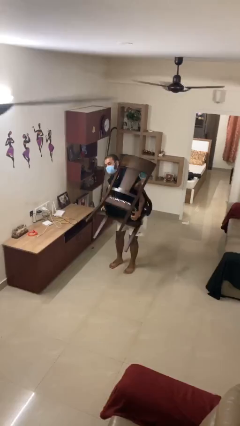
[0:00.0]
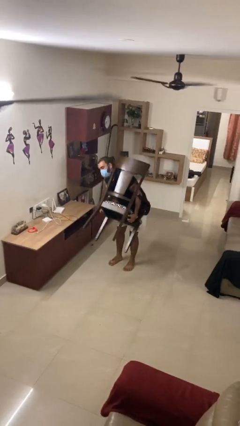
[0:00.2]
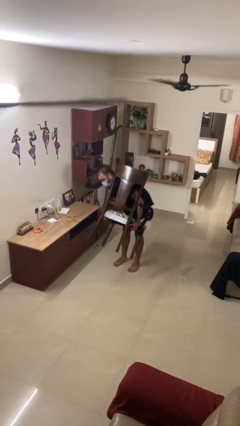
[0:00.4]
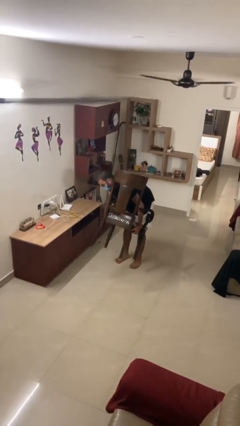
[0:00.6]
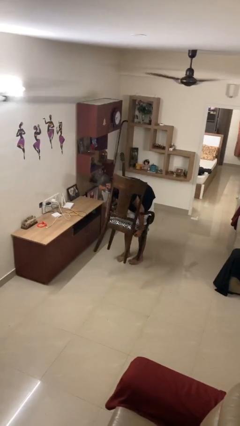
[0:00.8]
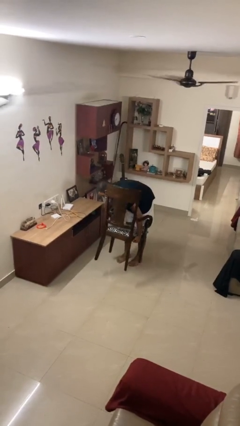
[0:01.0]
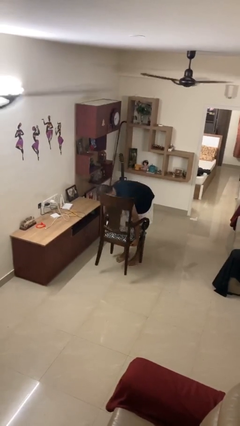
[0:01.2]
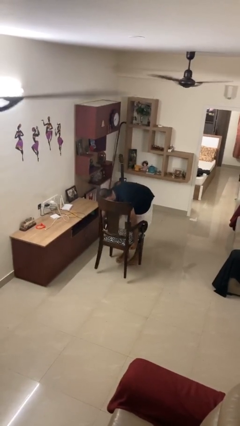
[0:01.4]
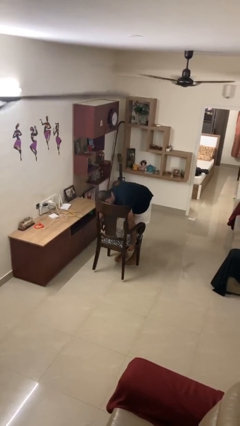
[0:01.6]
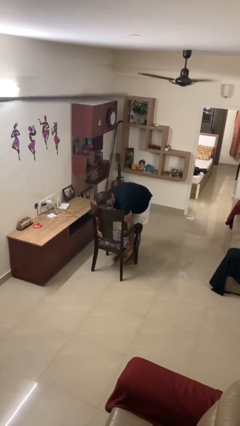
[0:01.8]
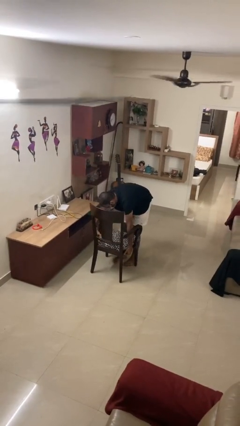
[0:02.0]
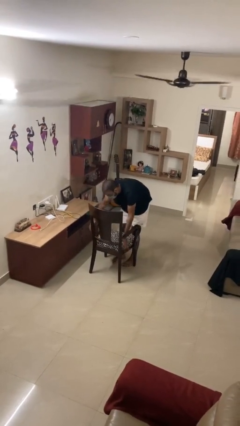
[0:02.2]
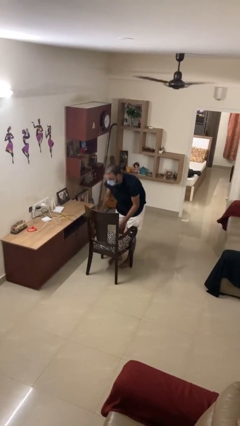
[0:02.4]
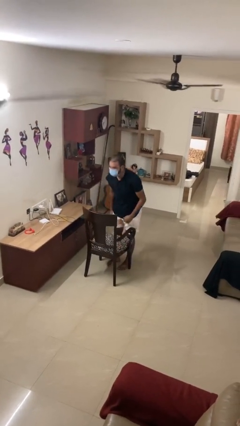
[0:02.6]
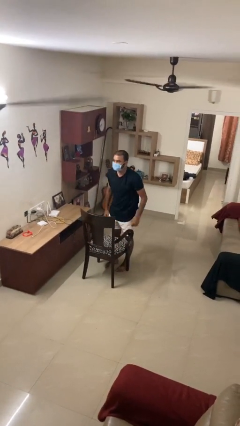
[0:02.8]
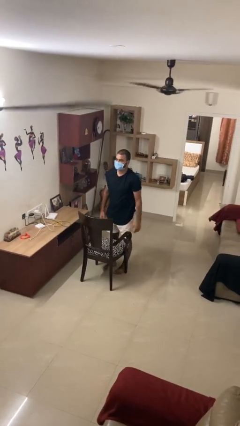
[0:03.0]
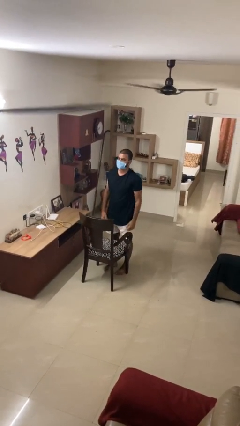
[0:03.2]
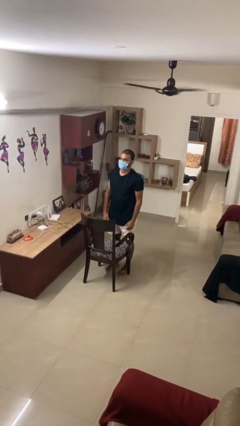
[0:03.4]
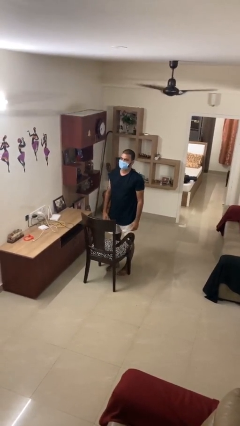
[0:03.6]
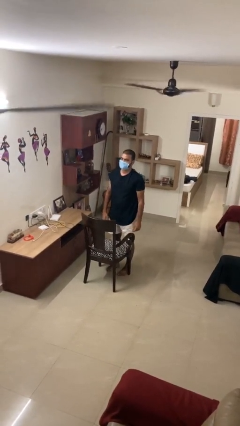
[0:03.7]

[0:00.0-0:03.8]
person puts down object on floor

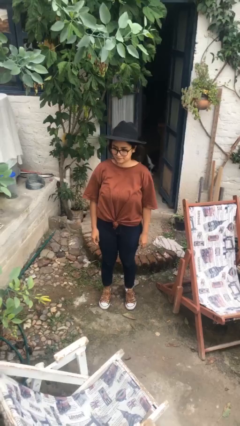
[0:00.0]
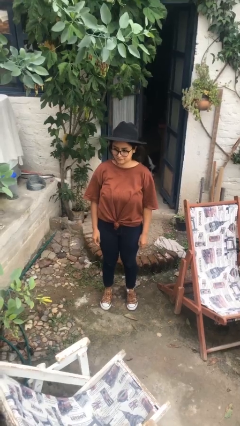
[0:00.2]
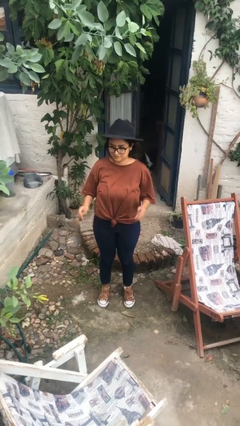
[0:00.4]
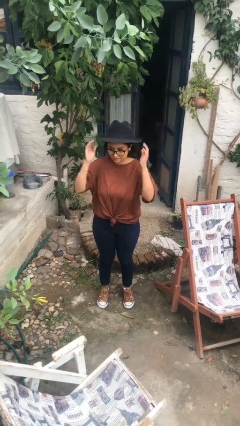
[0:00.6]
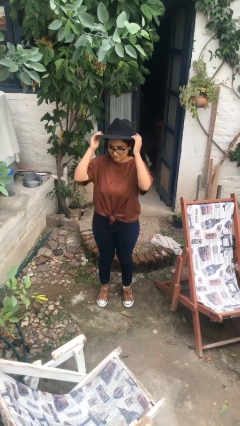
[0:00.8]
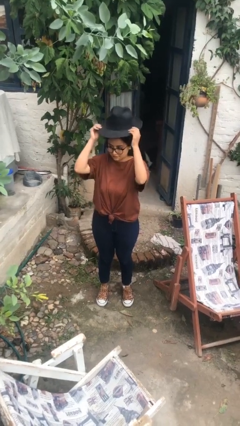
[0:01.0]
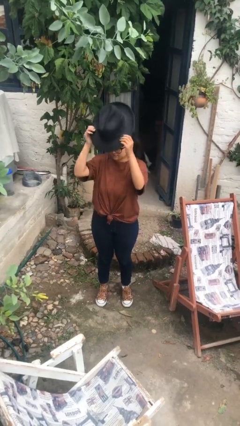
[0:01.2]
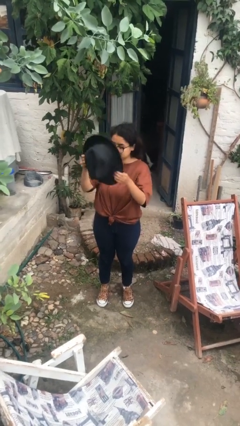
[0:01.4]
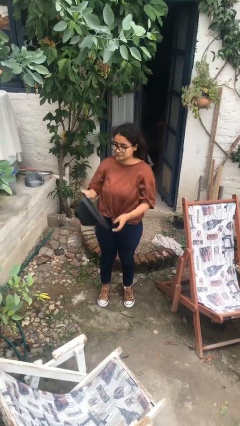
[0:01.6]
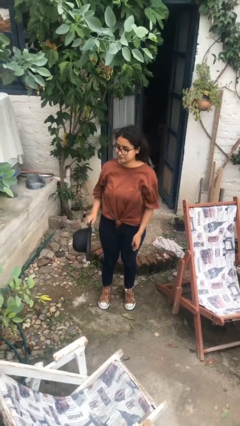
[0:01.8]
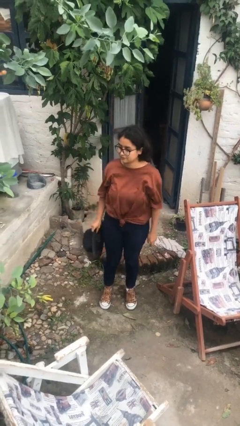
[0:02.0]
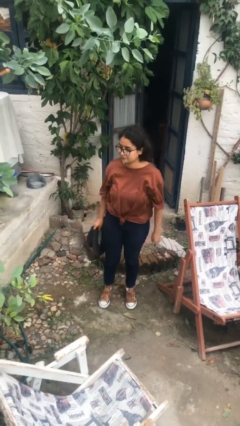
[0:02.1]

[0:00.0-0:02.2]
person takes off hat

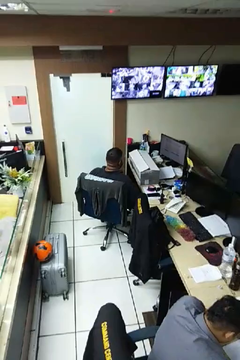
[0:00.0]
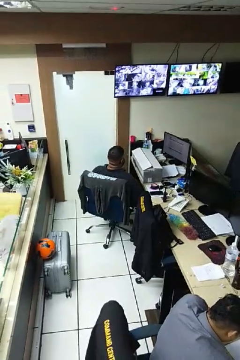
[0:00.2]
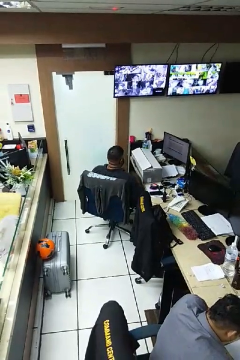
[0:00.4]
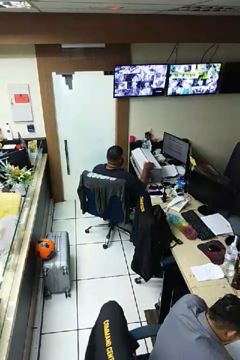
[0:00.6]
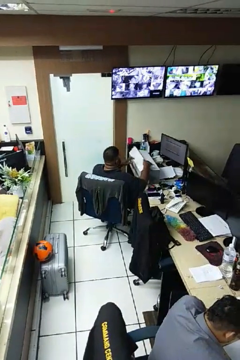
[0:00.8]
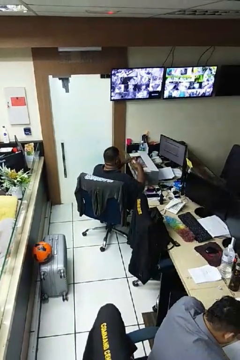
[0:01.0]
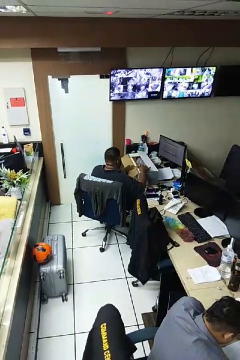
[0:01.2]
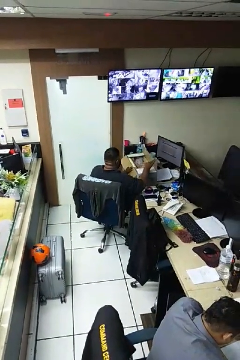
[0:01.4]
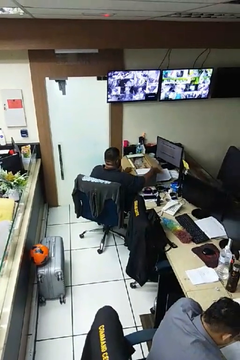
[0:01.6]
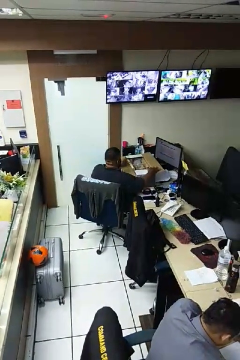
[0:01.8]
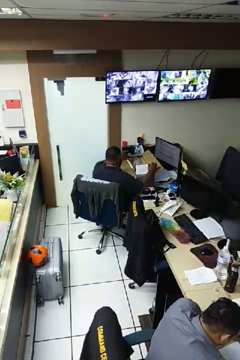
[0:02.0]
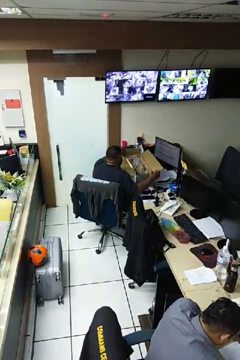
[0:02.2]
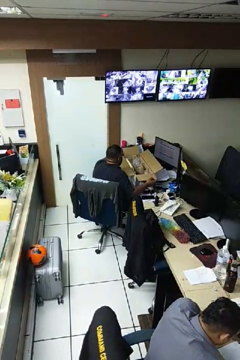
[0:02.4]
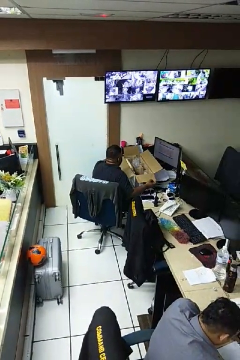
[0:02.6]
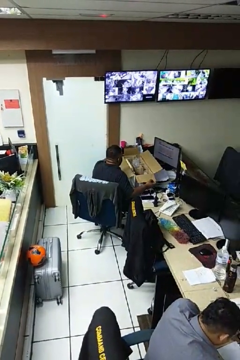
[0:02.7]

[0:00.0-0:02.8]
person opens box

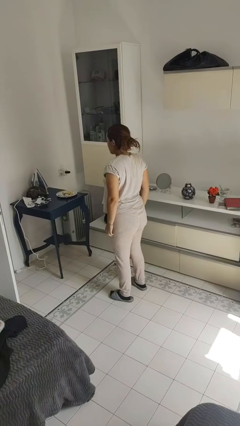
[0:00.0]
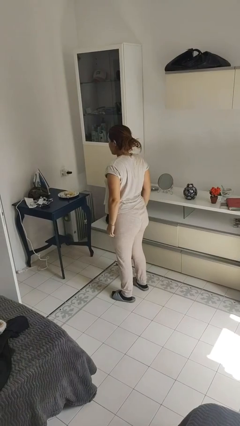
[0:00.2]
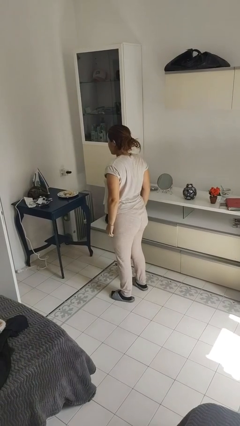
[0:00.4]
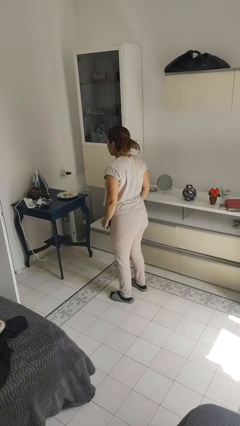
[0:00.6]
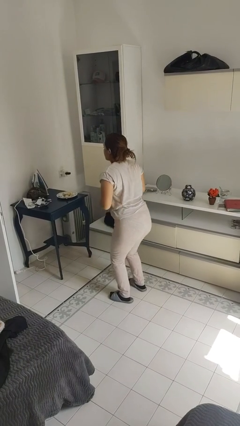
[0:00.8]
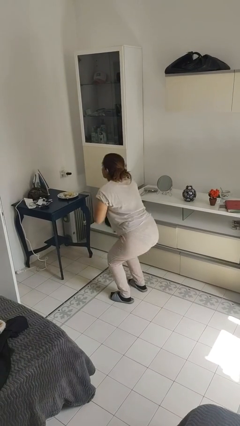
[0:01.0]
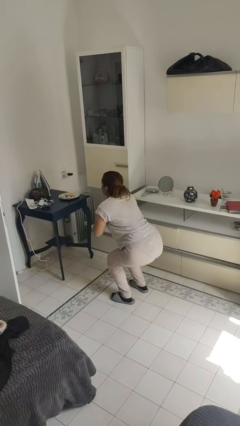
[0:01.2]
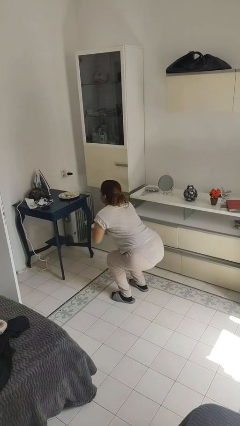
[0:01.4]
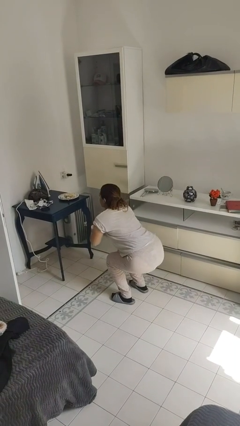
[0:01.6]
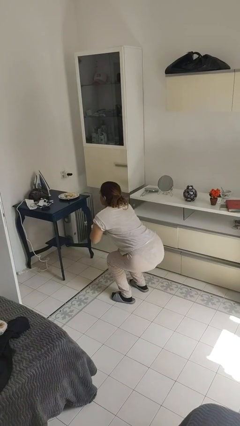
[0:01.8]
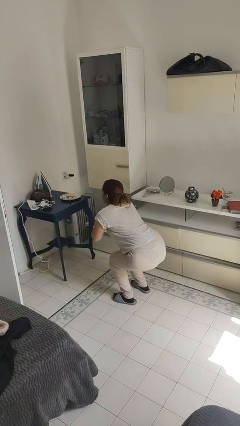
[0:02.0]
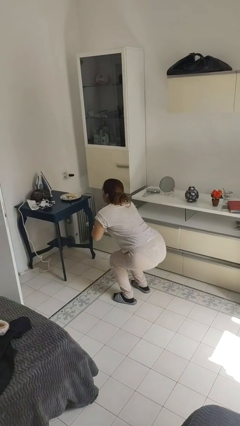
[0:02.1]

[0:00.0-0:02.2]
person squats

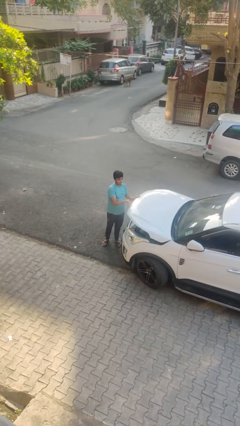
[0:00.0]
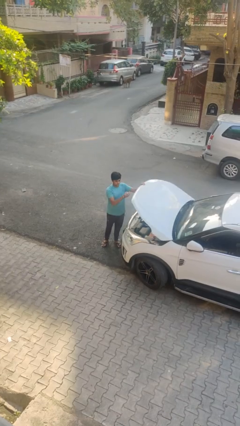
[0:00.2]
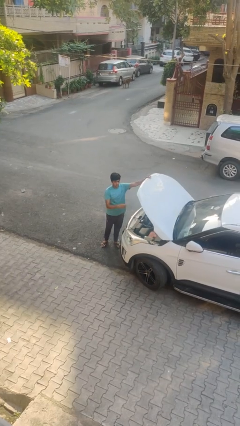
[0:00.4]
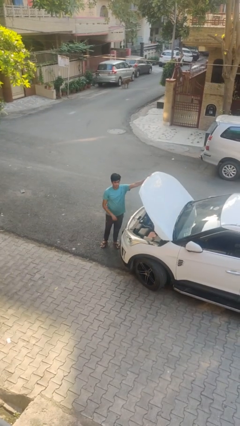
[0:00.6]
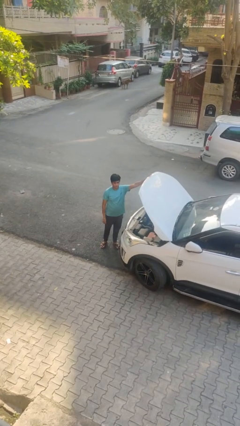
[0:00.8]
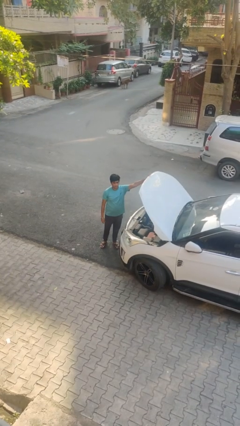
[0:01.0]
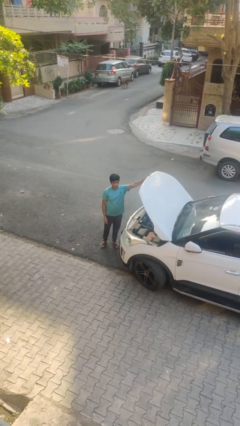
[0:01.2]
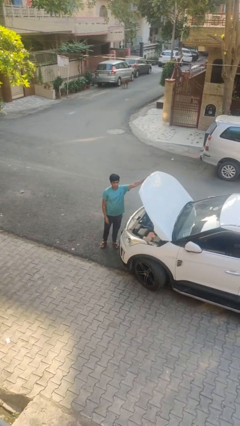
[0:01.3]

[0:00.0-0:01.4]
person opens car hood

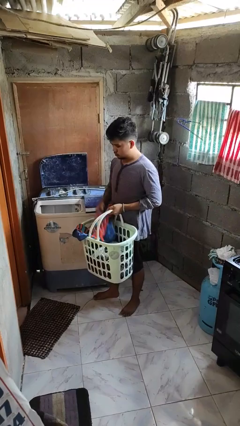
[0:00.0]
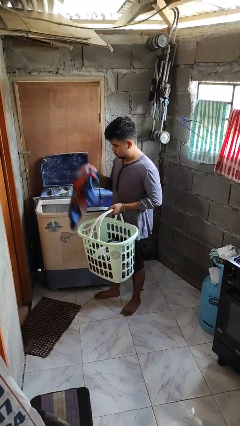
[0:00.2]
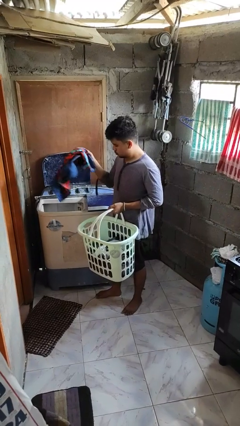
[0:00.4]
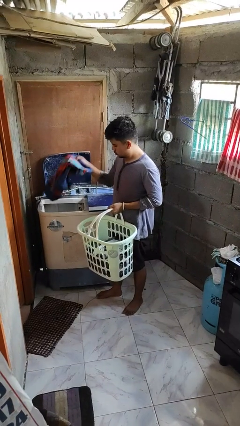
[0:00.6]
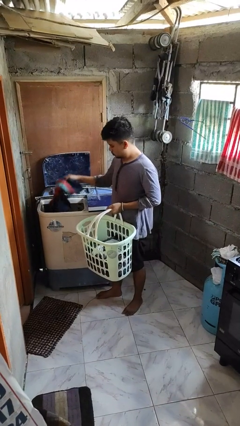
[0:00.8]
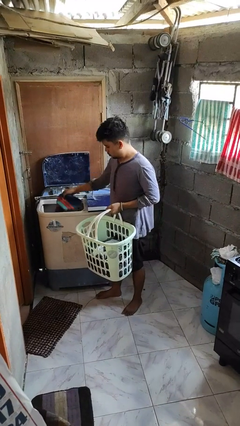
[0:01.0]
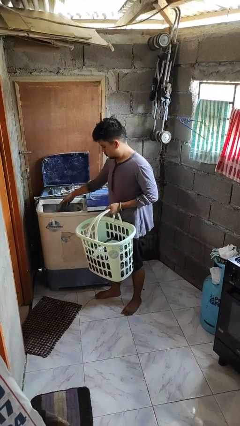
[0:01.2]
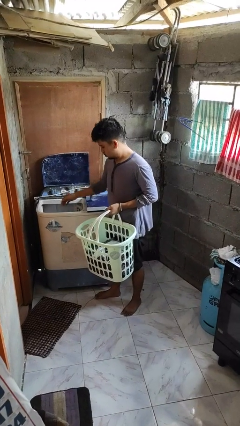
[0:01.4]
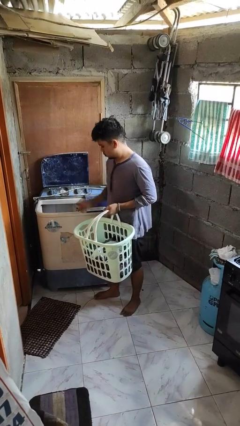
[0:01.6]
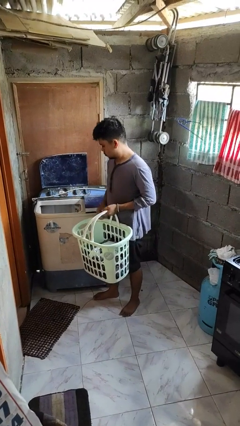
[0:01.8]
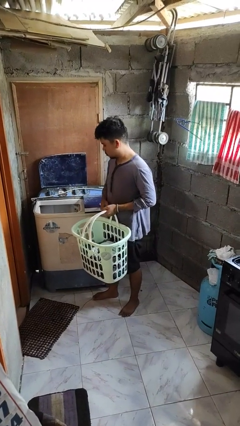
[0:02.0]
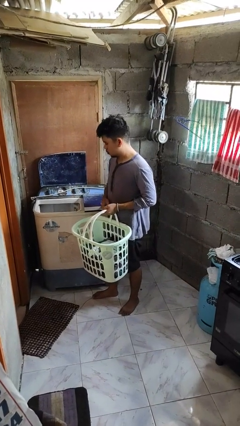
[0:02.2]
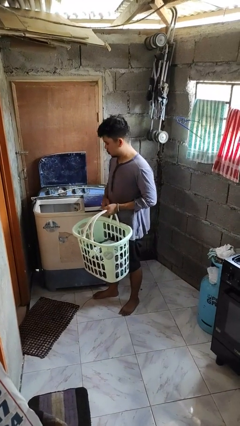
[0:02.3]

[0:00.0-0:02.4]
person loads clotheswasher

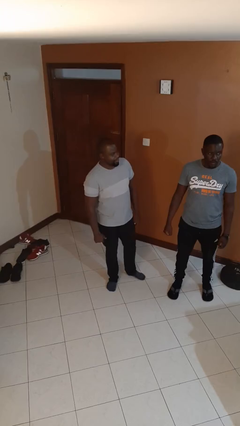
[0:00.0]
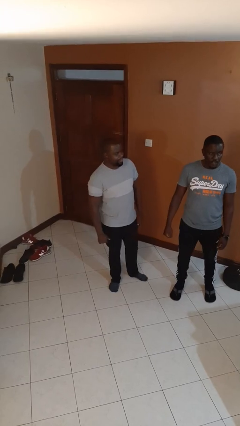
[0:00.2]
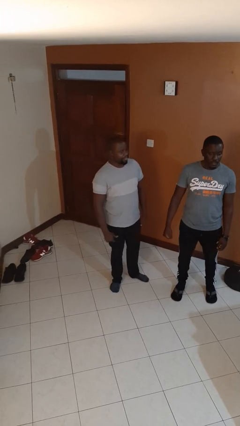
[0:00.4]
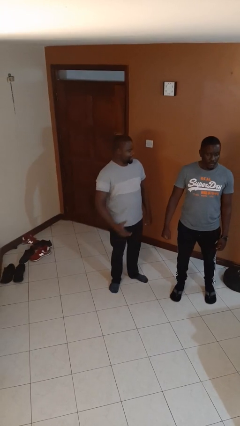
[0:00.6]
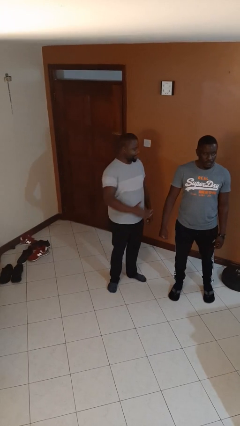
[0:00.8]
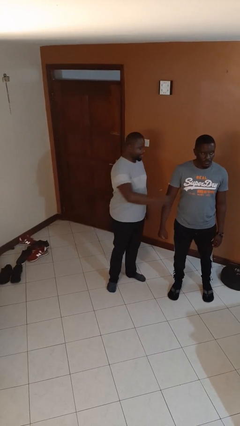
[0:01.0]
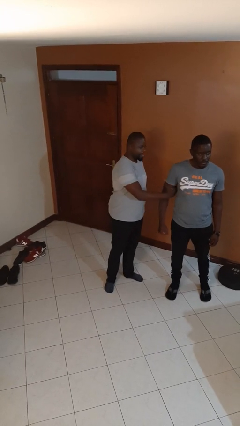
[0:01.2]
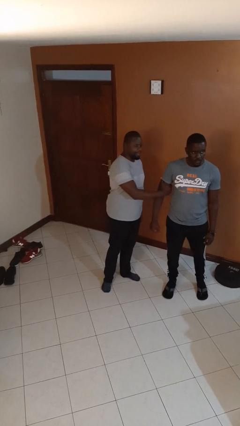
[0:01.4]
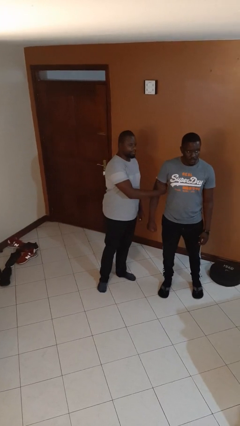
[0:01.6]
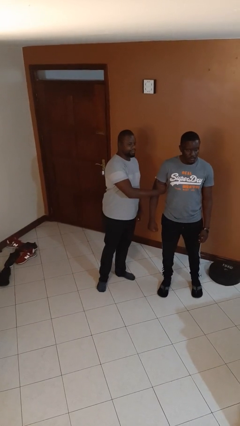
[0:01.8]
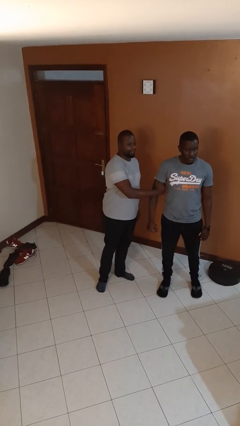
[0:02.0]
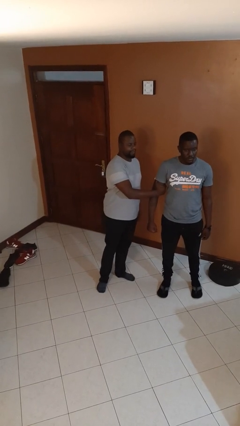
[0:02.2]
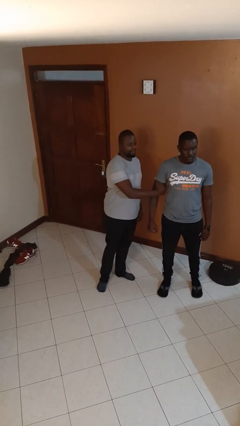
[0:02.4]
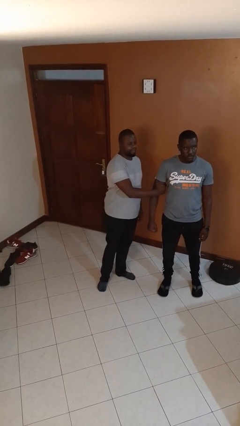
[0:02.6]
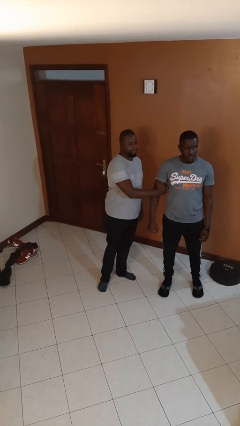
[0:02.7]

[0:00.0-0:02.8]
person grabs person by bicep
